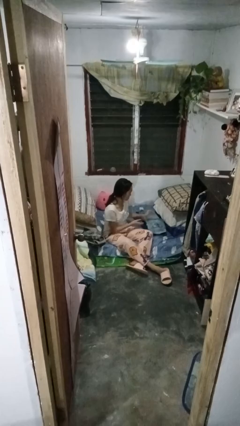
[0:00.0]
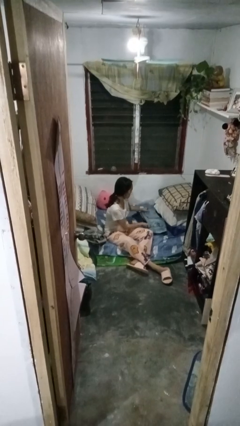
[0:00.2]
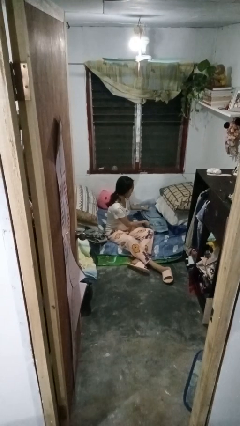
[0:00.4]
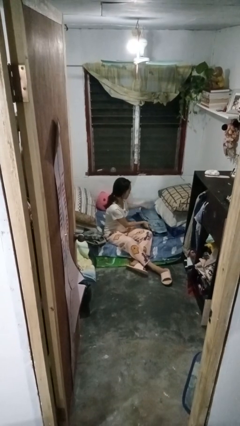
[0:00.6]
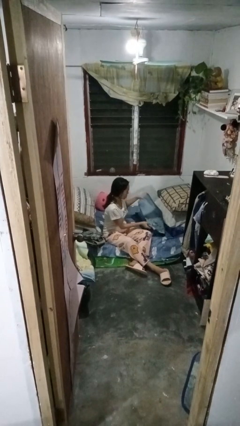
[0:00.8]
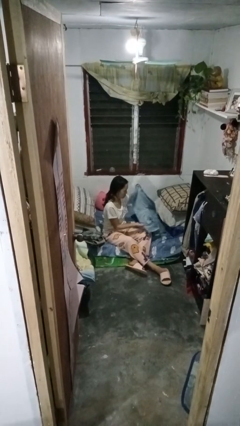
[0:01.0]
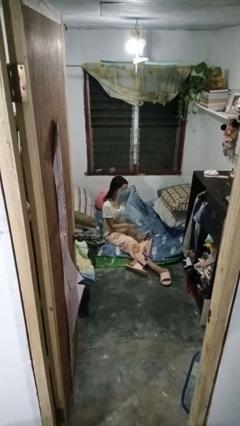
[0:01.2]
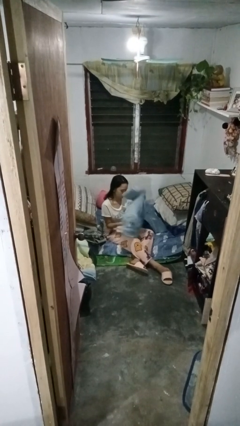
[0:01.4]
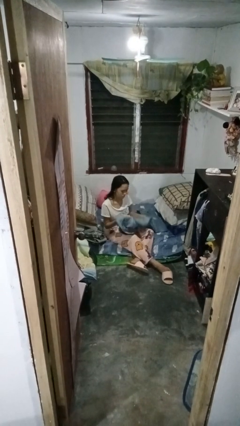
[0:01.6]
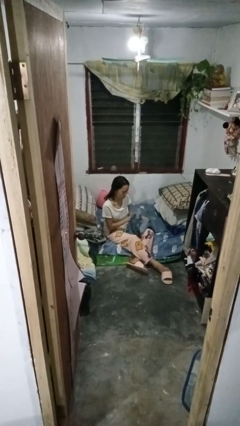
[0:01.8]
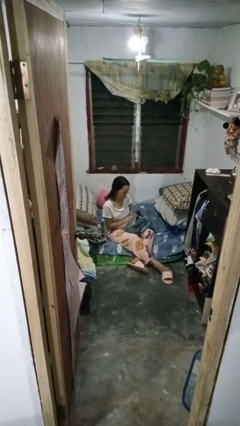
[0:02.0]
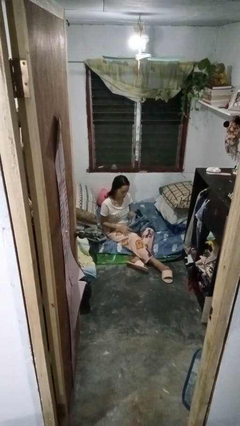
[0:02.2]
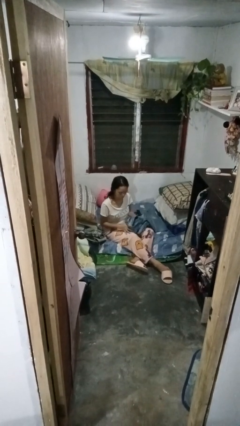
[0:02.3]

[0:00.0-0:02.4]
person folds pants

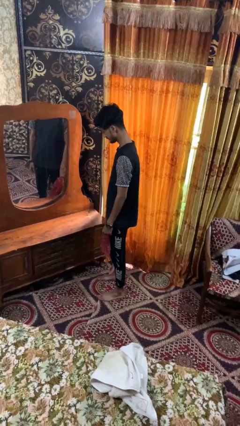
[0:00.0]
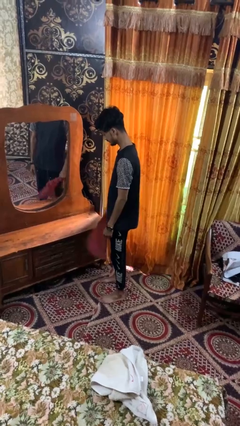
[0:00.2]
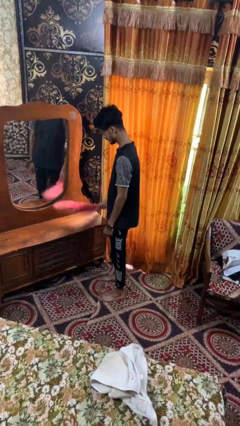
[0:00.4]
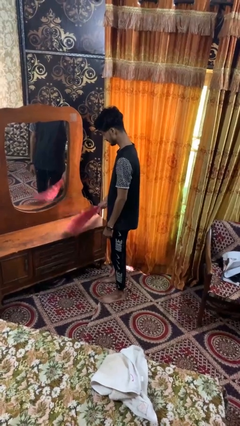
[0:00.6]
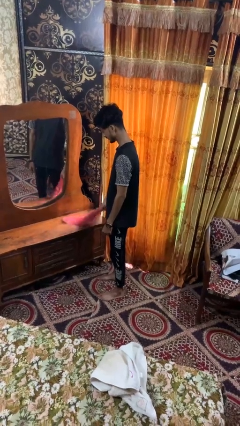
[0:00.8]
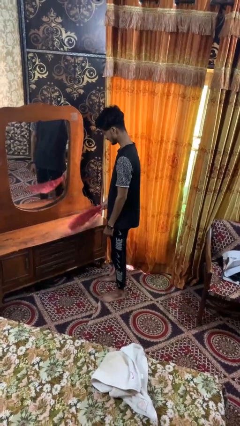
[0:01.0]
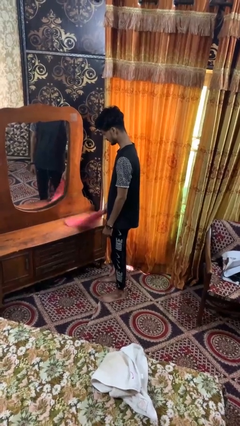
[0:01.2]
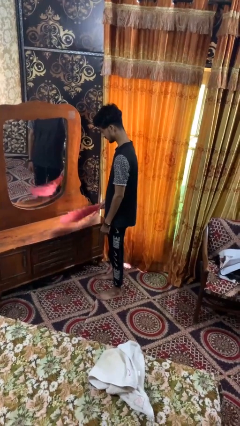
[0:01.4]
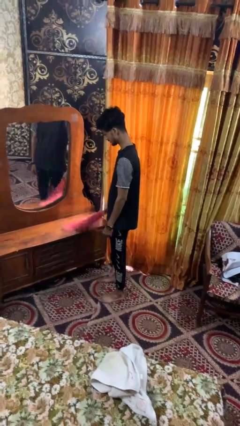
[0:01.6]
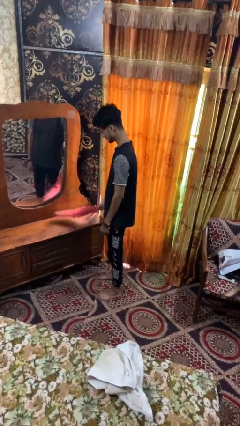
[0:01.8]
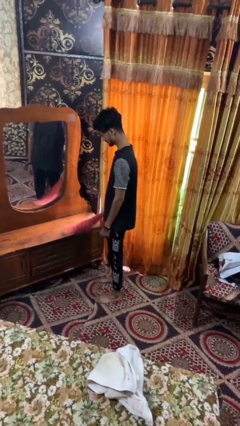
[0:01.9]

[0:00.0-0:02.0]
person dusts furniture

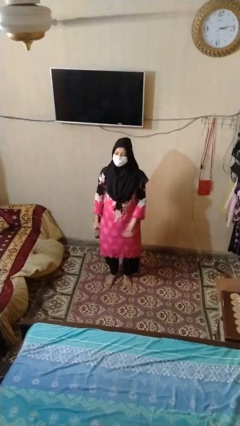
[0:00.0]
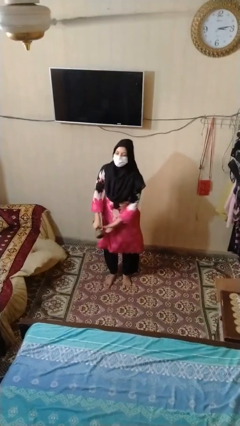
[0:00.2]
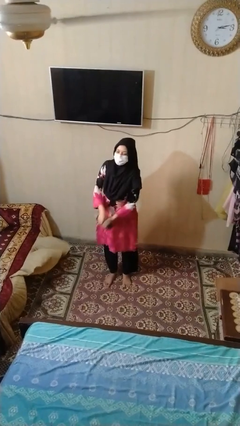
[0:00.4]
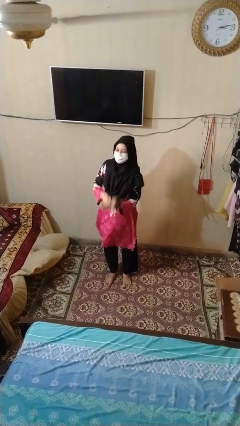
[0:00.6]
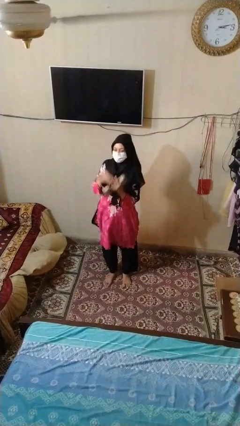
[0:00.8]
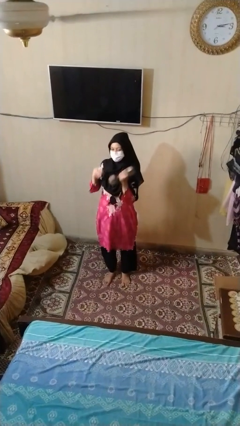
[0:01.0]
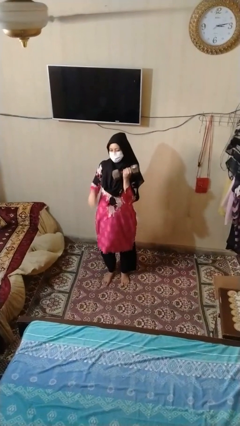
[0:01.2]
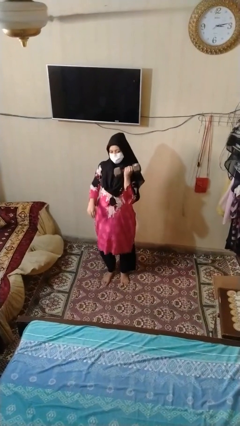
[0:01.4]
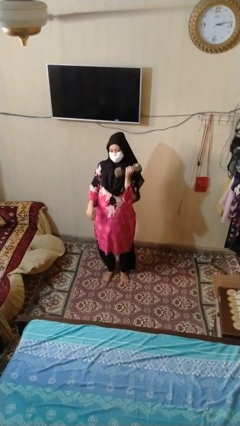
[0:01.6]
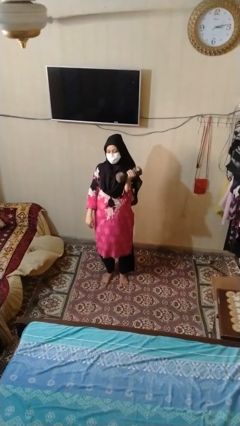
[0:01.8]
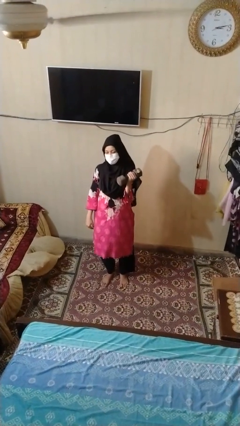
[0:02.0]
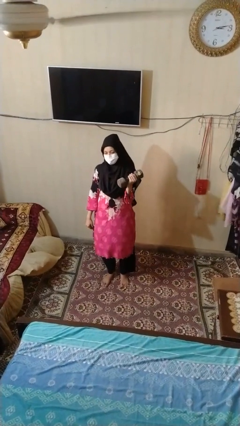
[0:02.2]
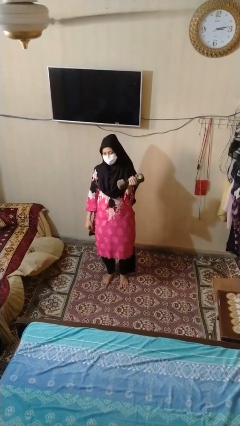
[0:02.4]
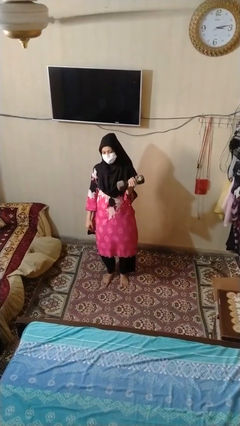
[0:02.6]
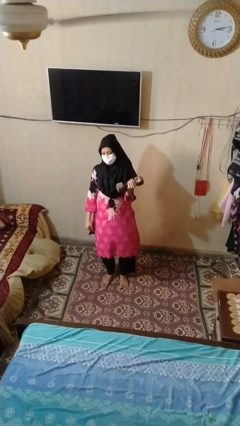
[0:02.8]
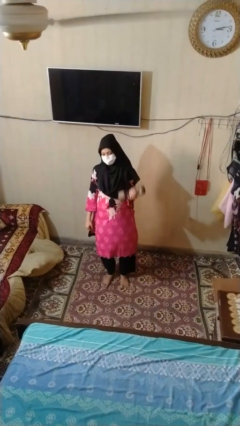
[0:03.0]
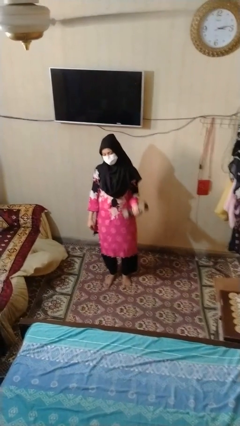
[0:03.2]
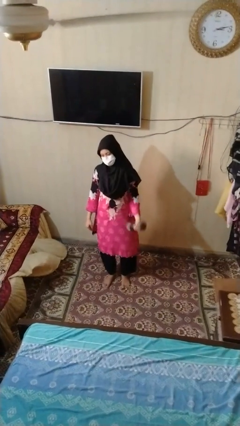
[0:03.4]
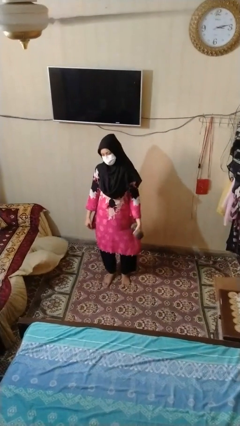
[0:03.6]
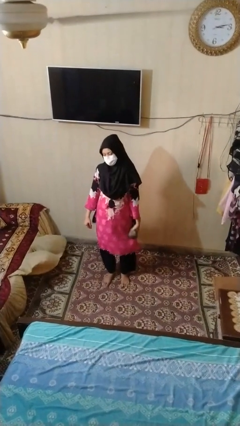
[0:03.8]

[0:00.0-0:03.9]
person lifts dumbbells

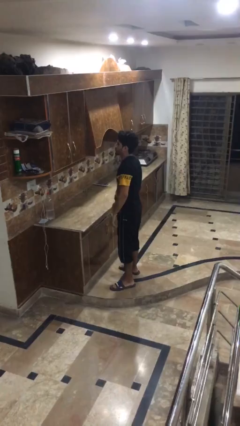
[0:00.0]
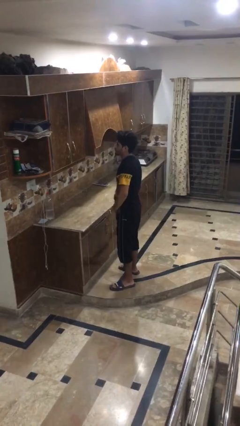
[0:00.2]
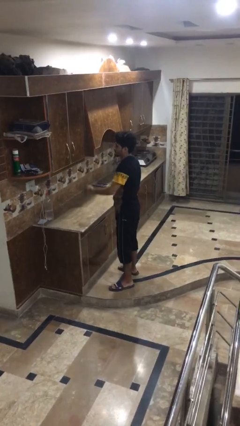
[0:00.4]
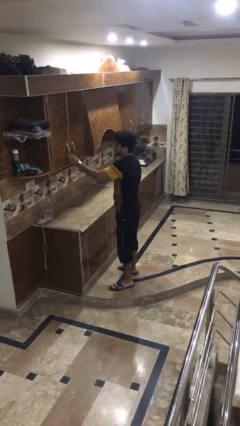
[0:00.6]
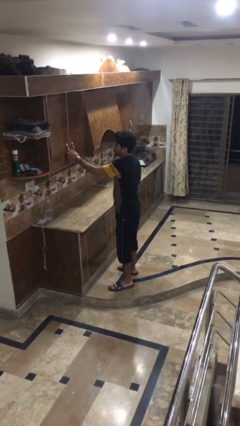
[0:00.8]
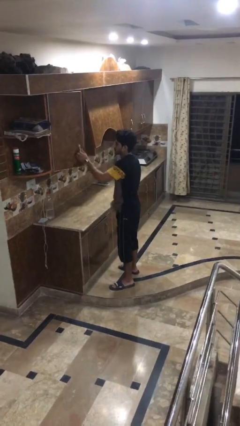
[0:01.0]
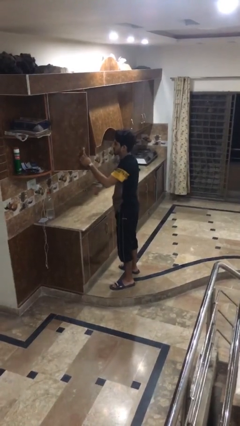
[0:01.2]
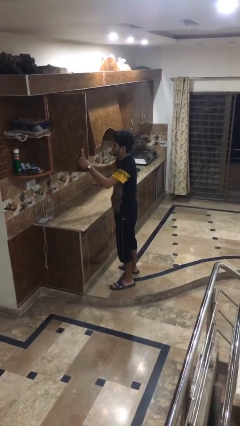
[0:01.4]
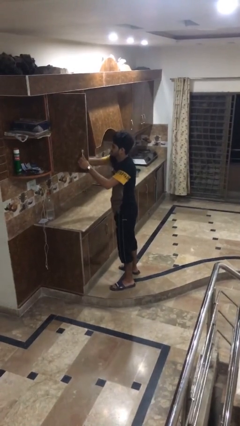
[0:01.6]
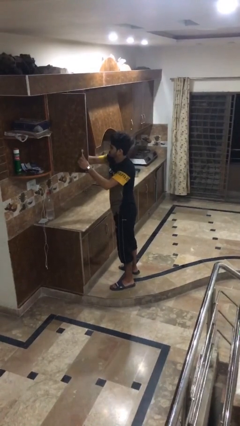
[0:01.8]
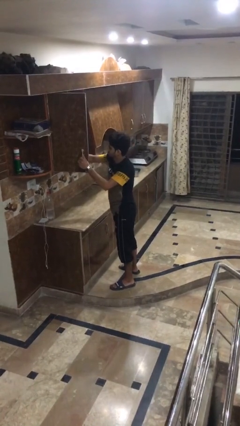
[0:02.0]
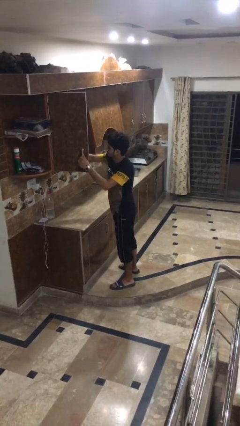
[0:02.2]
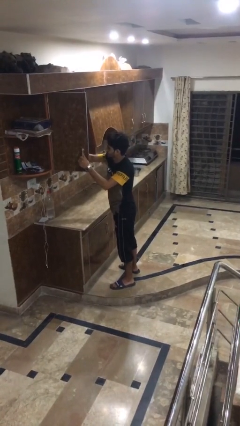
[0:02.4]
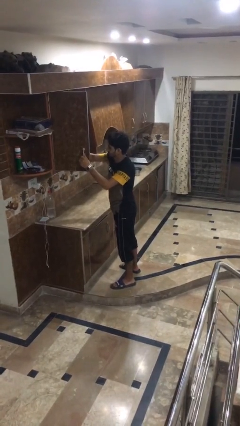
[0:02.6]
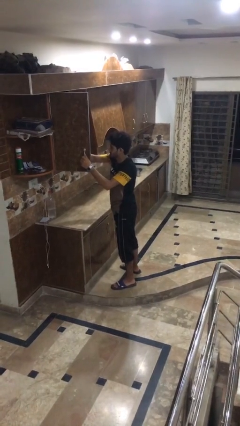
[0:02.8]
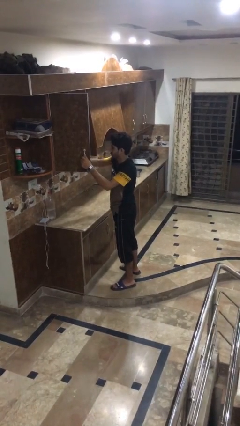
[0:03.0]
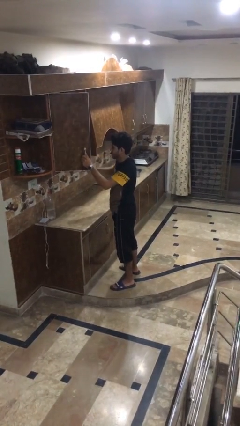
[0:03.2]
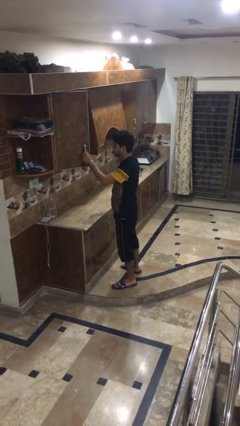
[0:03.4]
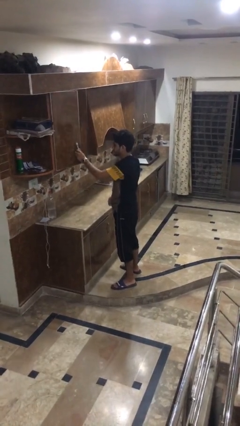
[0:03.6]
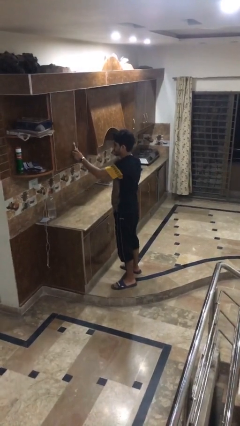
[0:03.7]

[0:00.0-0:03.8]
person searches in cabinet

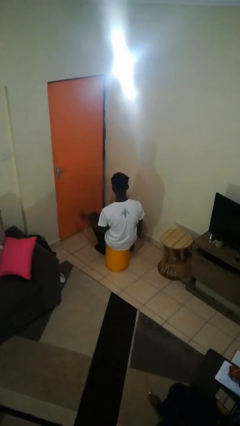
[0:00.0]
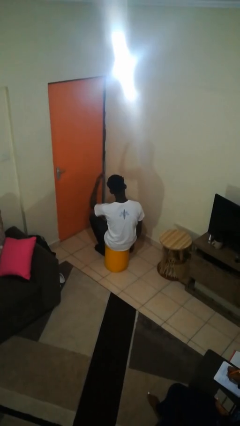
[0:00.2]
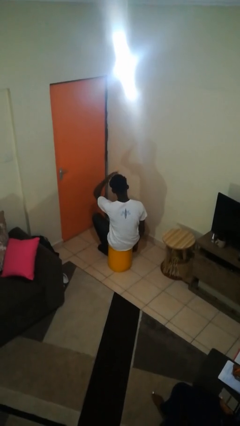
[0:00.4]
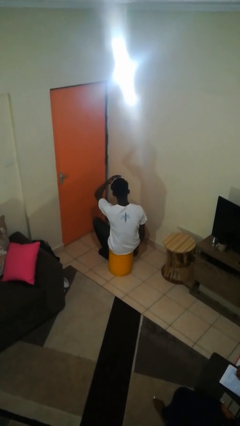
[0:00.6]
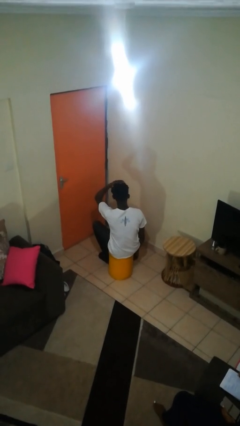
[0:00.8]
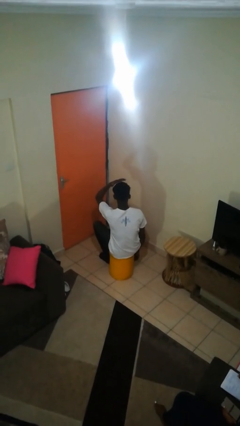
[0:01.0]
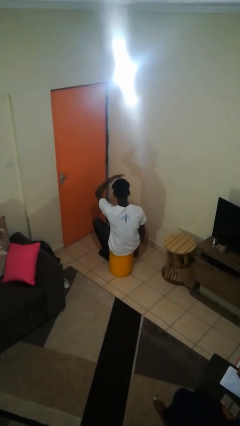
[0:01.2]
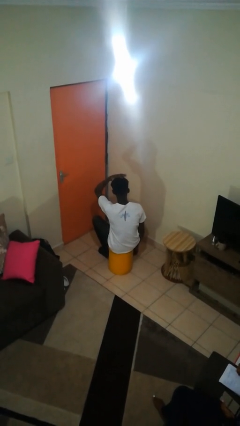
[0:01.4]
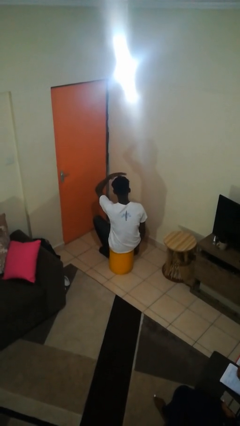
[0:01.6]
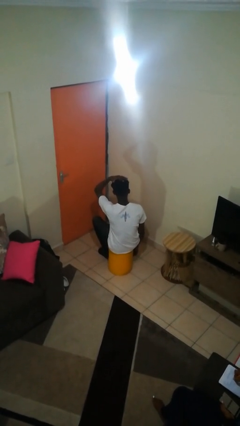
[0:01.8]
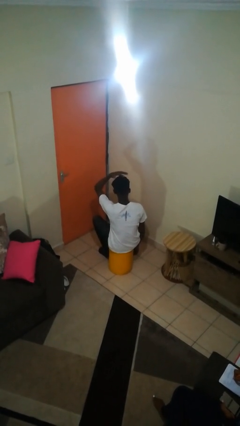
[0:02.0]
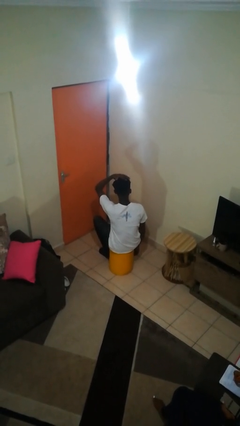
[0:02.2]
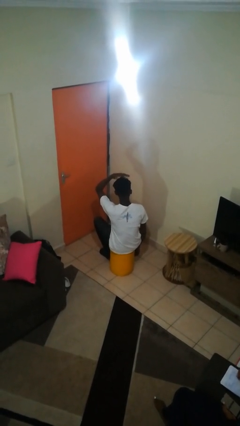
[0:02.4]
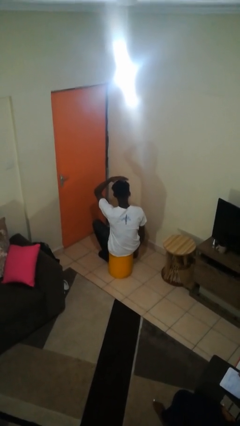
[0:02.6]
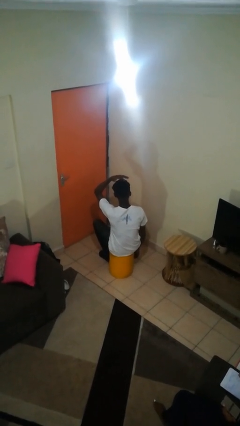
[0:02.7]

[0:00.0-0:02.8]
person pats head

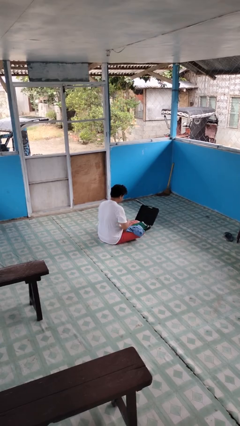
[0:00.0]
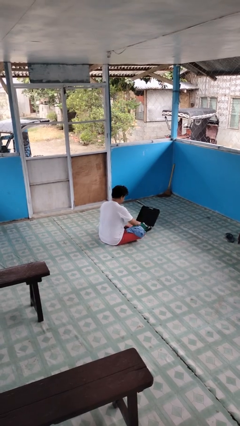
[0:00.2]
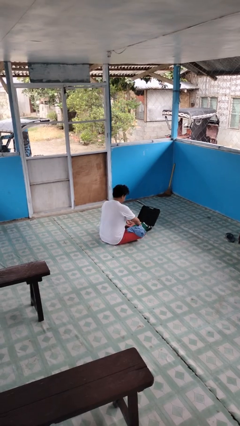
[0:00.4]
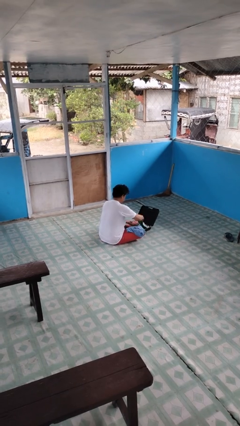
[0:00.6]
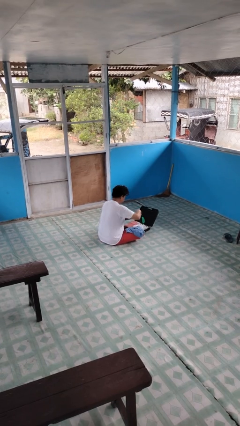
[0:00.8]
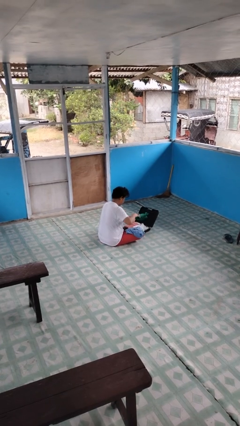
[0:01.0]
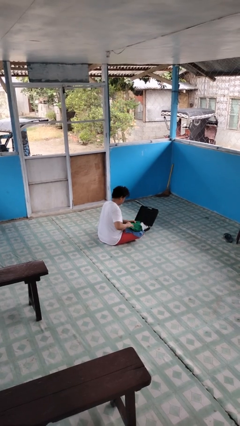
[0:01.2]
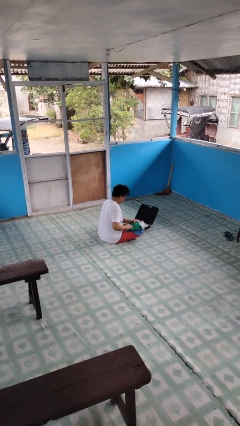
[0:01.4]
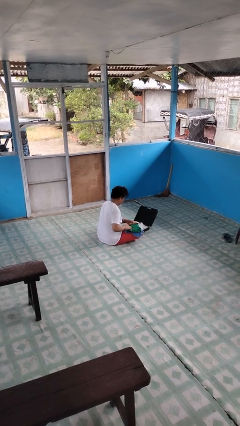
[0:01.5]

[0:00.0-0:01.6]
person unloads clothes from suitcase

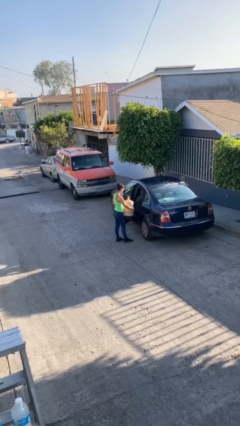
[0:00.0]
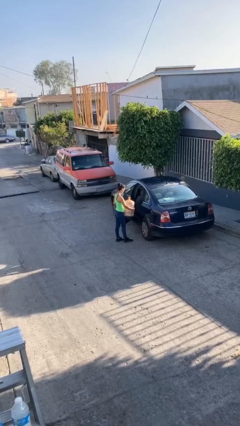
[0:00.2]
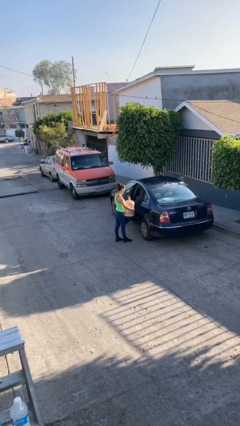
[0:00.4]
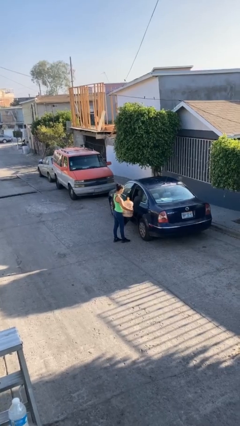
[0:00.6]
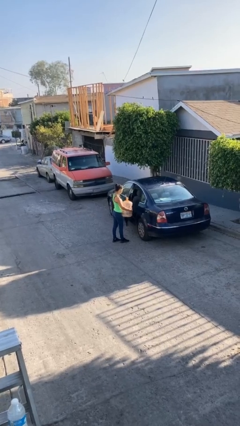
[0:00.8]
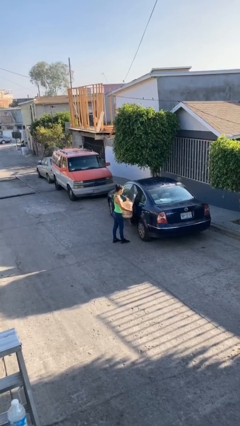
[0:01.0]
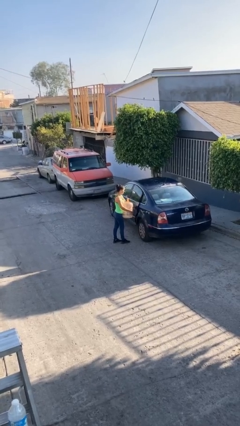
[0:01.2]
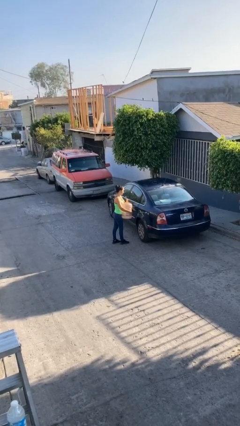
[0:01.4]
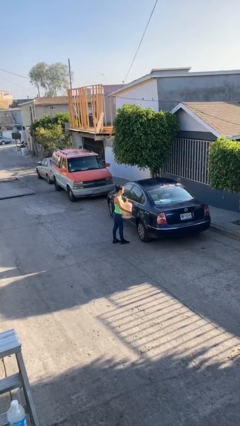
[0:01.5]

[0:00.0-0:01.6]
person closes car door
